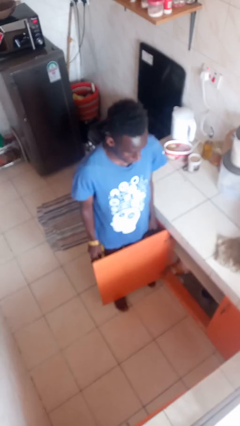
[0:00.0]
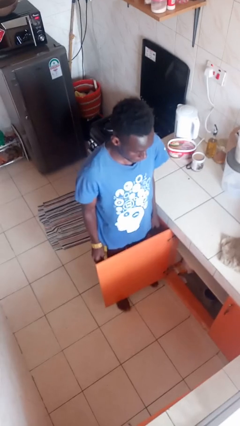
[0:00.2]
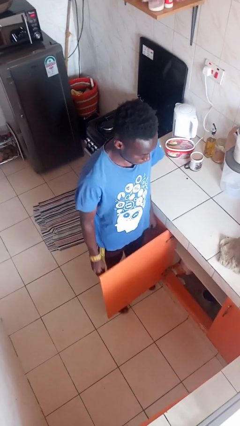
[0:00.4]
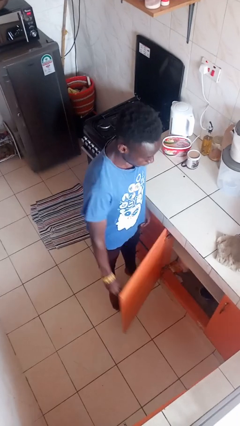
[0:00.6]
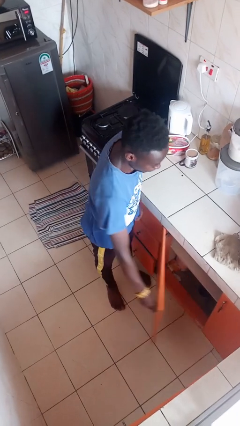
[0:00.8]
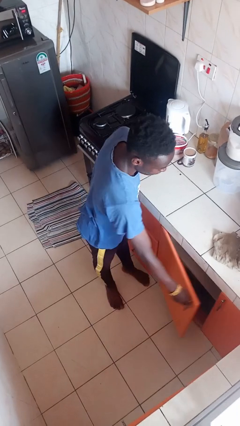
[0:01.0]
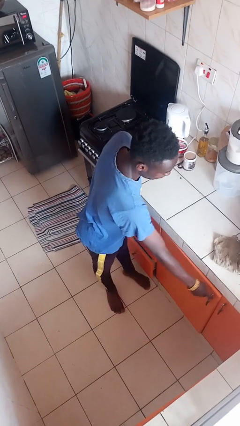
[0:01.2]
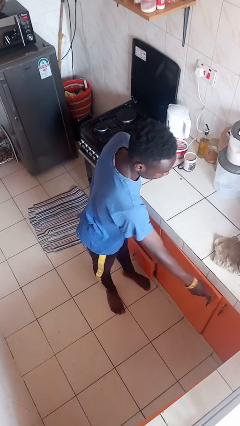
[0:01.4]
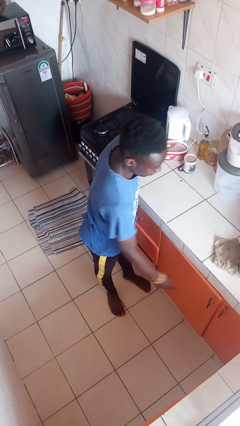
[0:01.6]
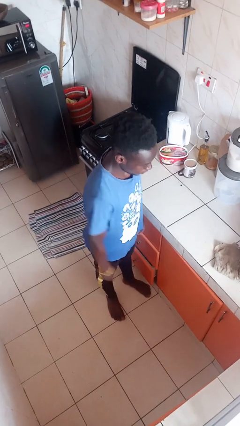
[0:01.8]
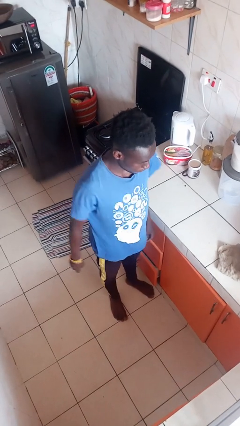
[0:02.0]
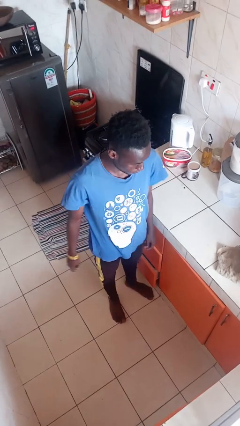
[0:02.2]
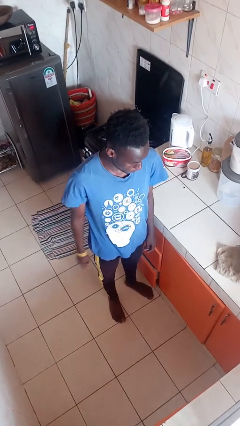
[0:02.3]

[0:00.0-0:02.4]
person closes cabinet

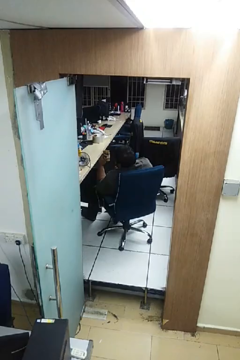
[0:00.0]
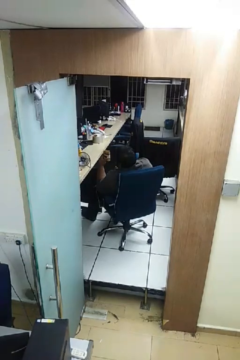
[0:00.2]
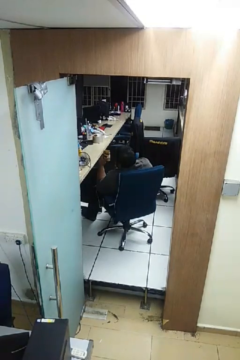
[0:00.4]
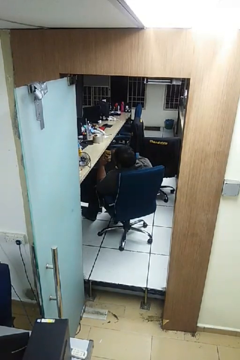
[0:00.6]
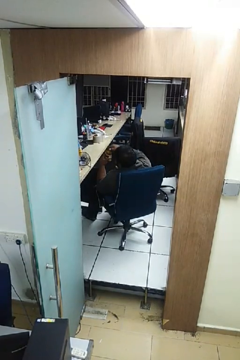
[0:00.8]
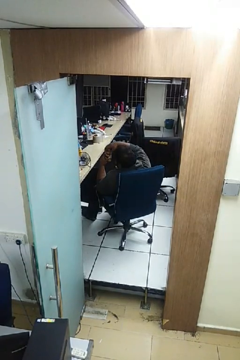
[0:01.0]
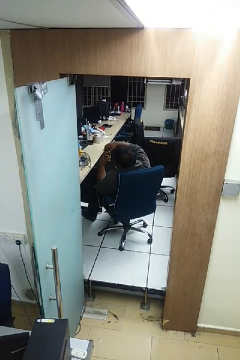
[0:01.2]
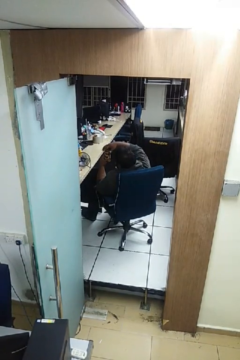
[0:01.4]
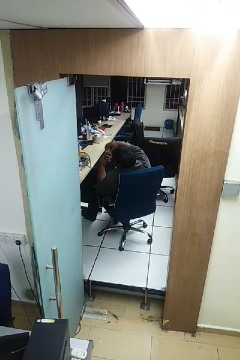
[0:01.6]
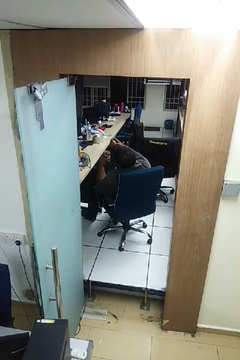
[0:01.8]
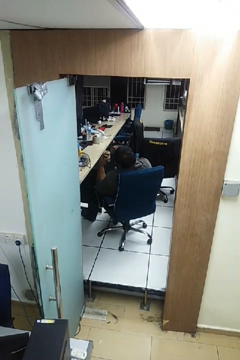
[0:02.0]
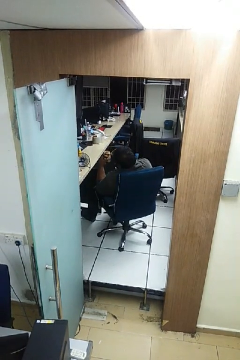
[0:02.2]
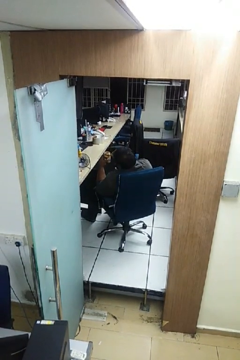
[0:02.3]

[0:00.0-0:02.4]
person opens jar

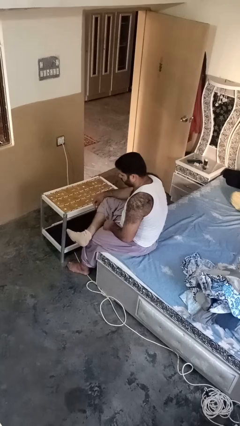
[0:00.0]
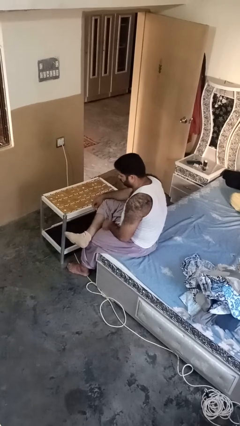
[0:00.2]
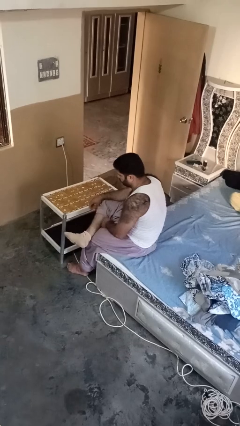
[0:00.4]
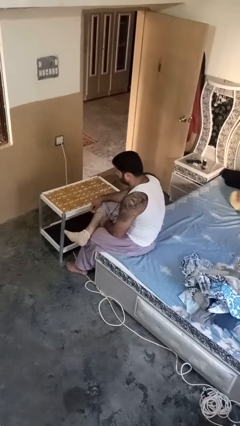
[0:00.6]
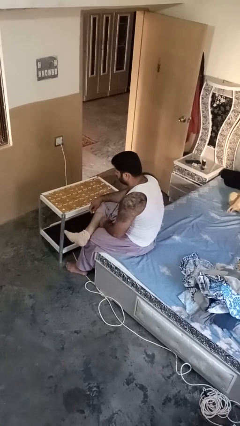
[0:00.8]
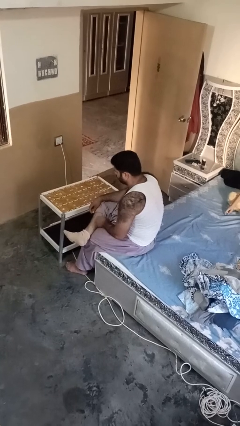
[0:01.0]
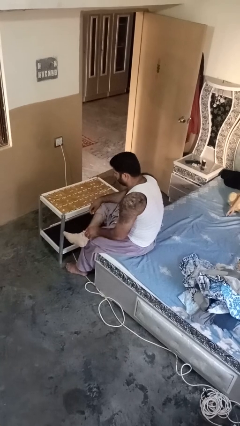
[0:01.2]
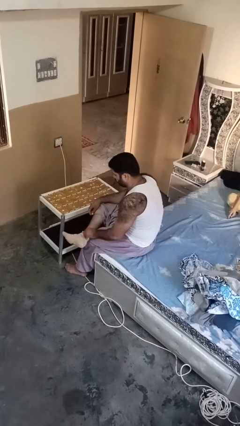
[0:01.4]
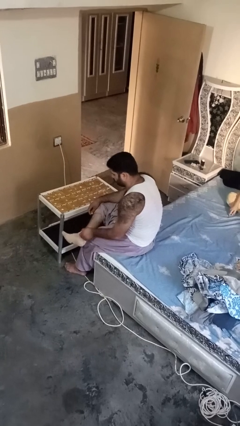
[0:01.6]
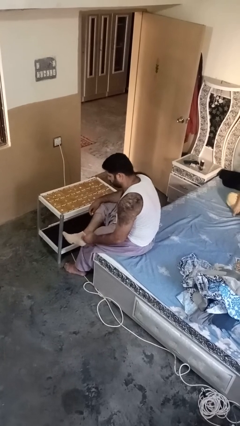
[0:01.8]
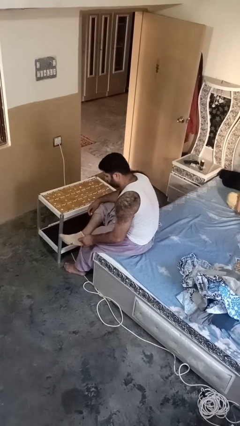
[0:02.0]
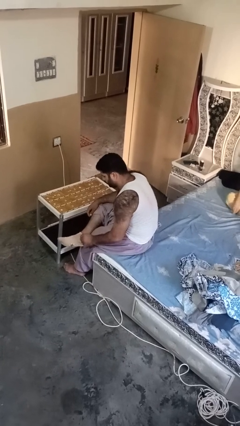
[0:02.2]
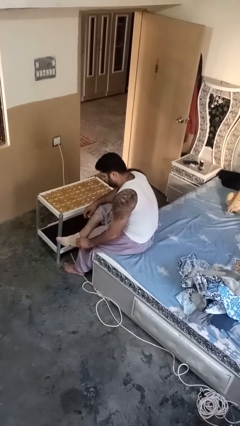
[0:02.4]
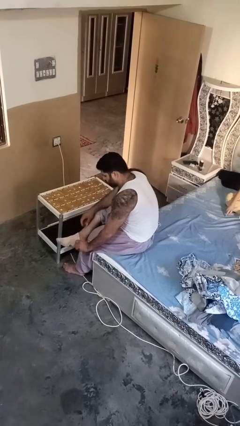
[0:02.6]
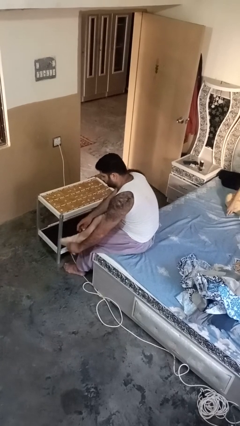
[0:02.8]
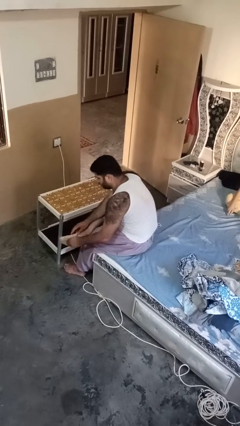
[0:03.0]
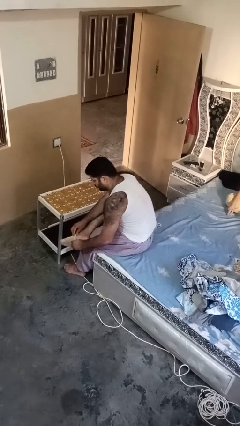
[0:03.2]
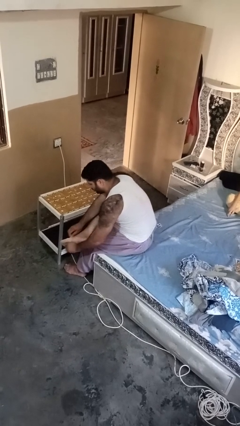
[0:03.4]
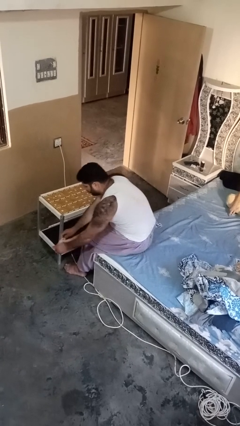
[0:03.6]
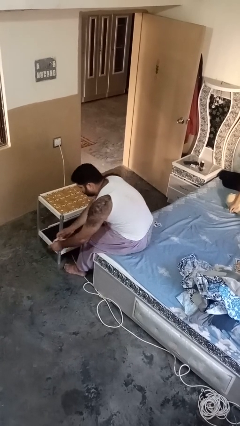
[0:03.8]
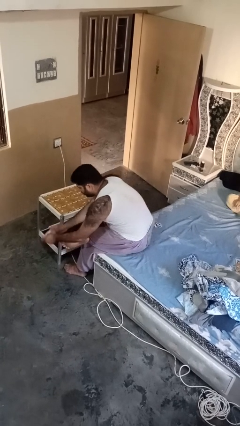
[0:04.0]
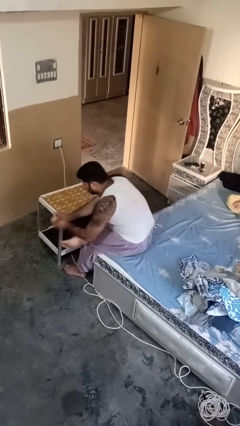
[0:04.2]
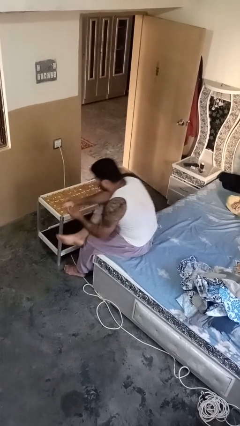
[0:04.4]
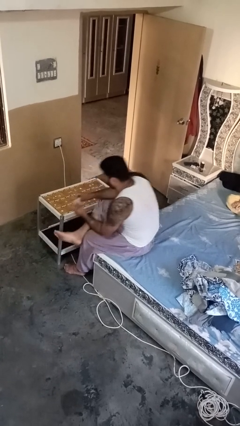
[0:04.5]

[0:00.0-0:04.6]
person takes off socks

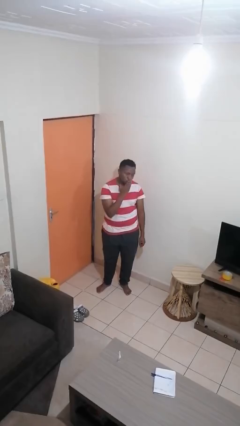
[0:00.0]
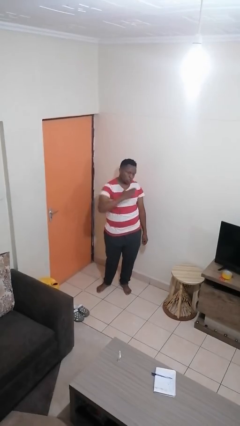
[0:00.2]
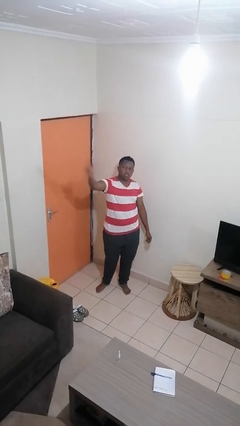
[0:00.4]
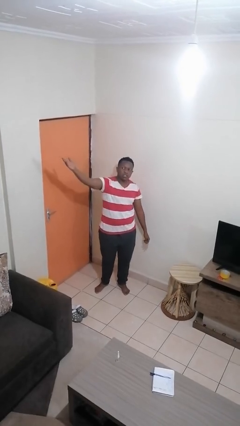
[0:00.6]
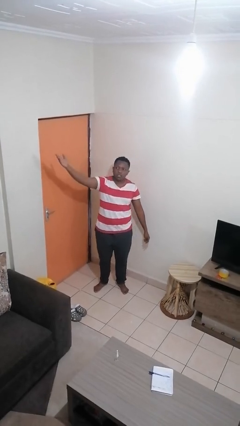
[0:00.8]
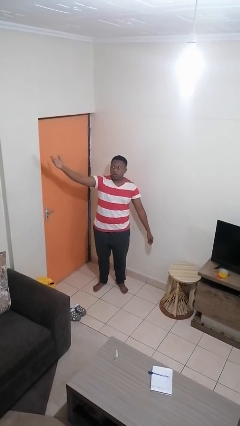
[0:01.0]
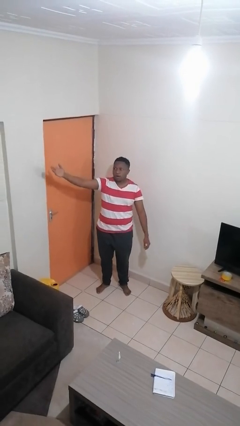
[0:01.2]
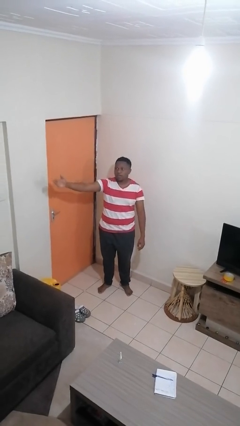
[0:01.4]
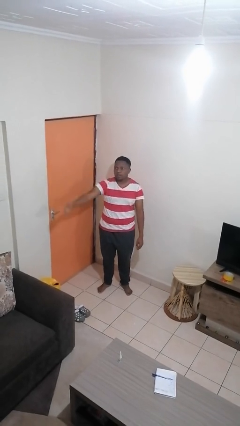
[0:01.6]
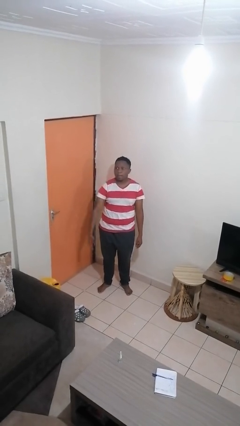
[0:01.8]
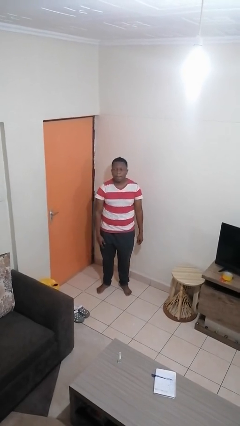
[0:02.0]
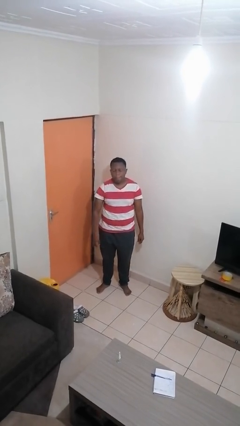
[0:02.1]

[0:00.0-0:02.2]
person gestures blow kiss

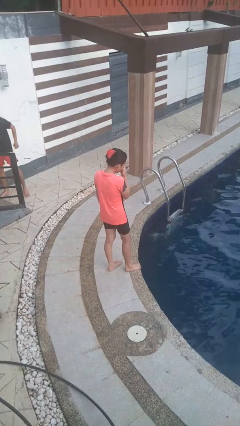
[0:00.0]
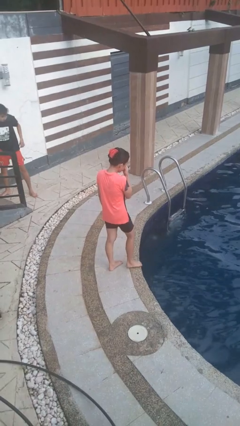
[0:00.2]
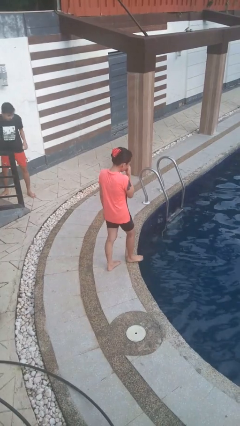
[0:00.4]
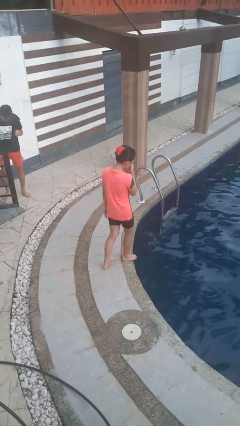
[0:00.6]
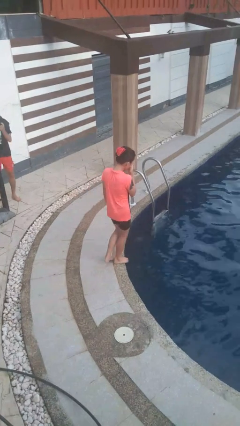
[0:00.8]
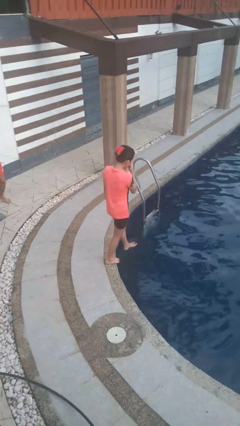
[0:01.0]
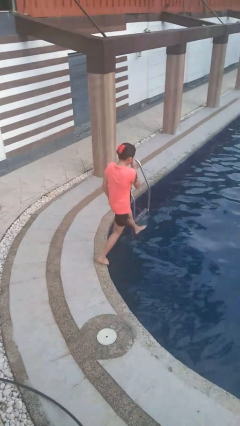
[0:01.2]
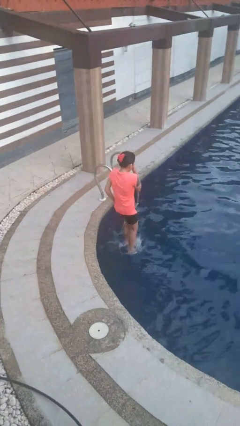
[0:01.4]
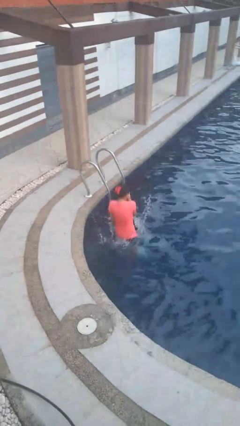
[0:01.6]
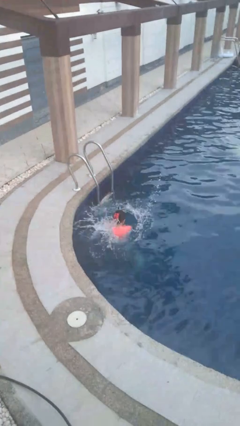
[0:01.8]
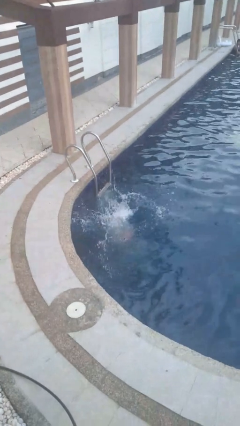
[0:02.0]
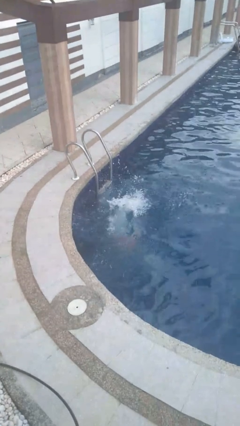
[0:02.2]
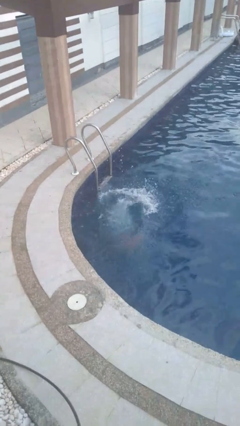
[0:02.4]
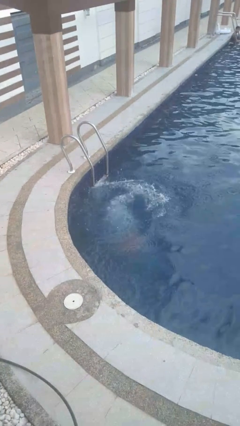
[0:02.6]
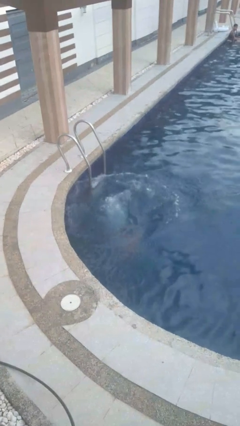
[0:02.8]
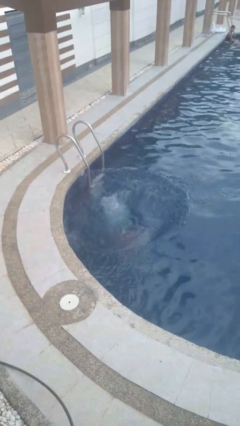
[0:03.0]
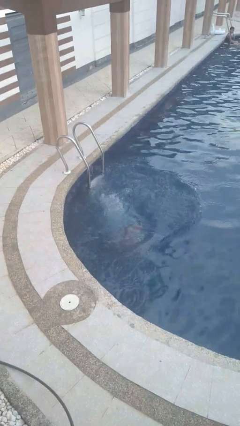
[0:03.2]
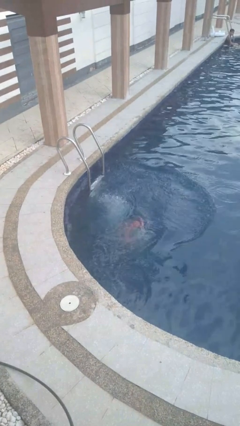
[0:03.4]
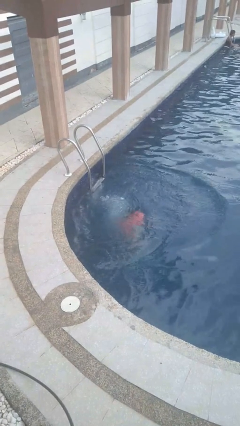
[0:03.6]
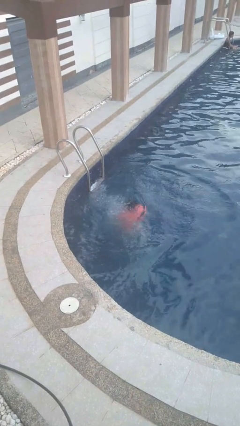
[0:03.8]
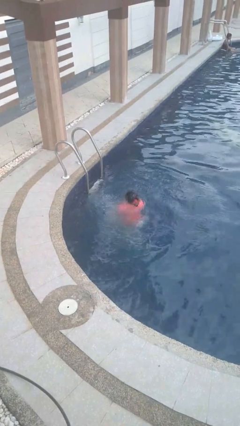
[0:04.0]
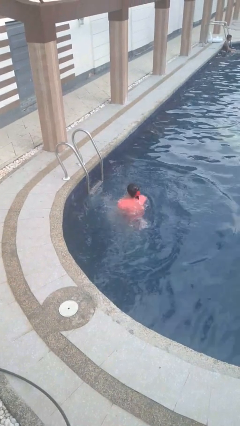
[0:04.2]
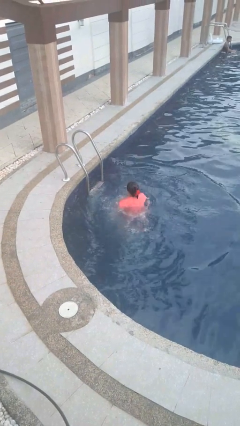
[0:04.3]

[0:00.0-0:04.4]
person jumps into pool

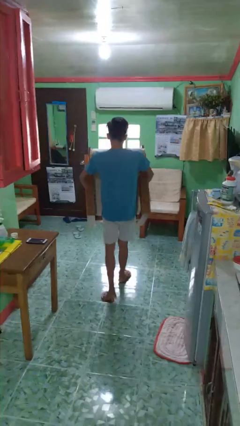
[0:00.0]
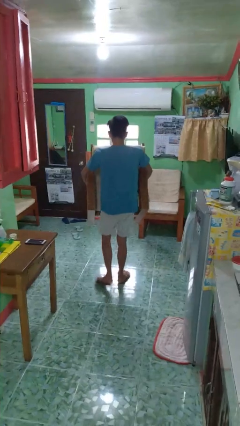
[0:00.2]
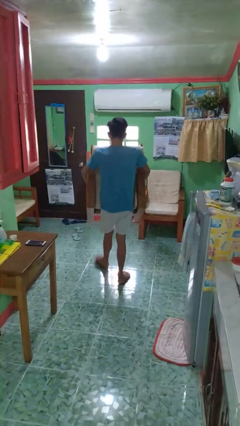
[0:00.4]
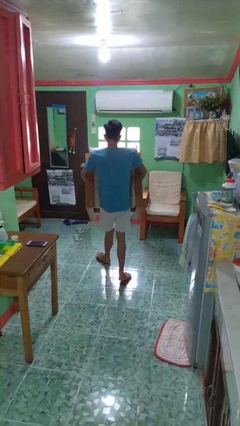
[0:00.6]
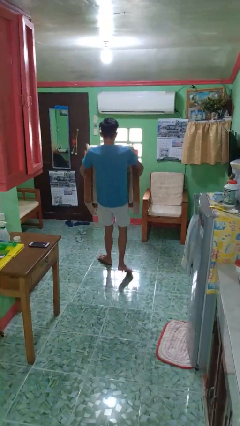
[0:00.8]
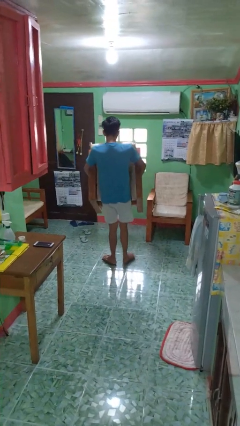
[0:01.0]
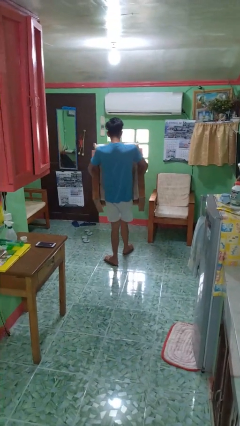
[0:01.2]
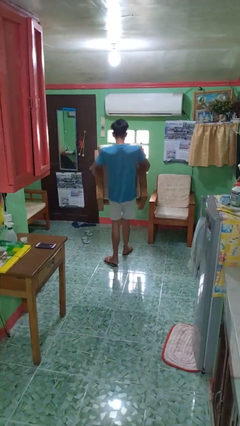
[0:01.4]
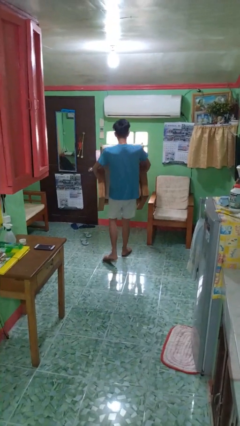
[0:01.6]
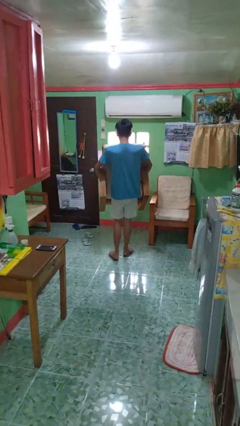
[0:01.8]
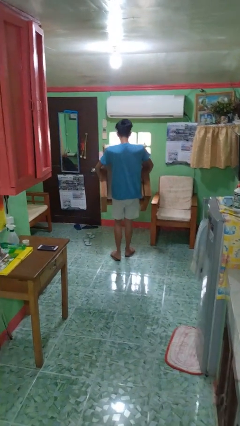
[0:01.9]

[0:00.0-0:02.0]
person carries furniture

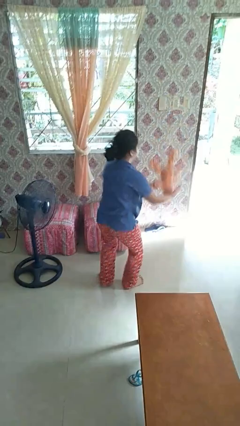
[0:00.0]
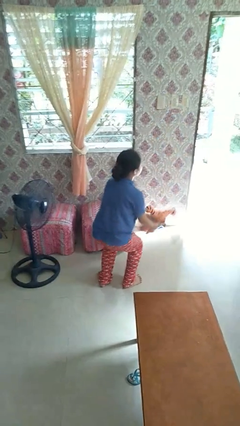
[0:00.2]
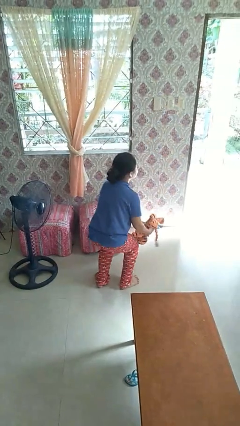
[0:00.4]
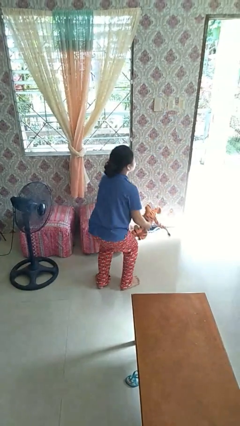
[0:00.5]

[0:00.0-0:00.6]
person catches dropped object
